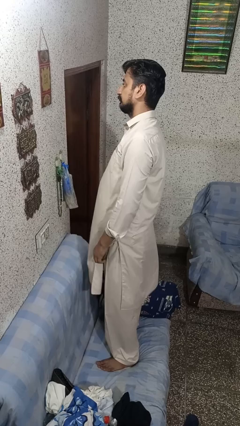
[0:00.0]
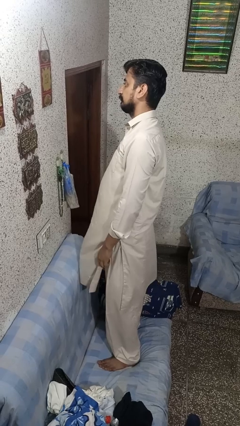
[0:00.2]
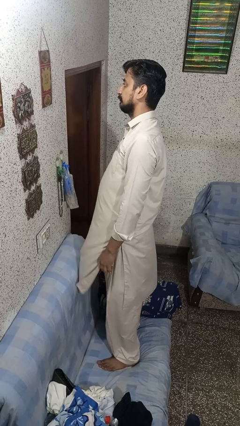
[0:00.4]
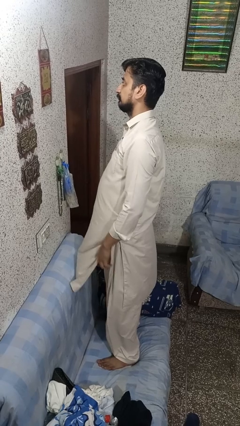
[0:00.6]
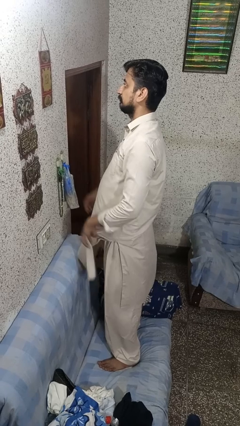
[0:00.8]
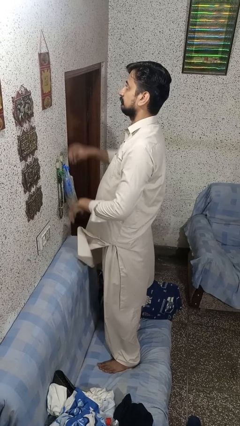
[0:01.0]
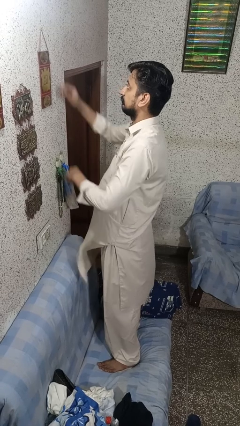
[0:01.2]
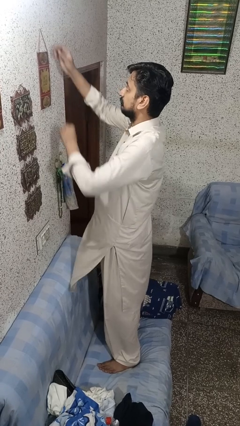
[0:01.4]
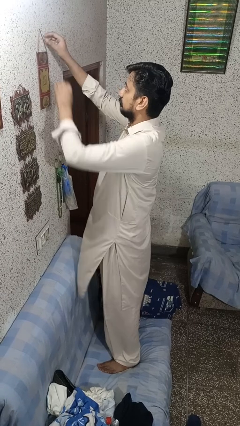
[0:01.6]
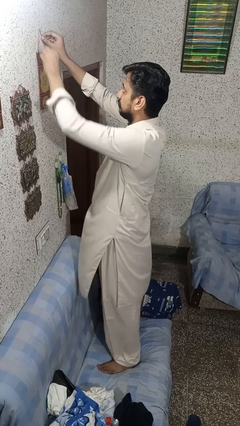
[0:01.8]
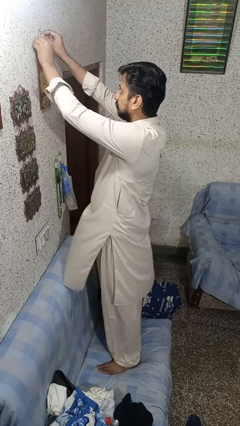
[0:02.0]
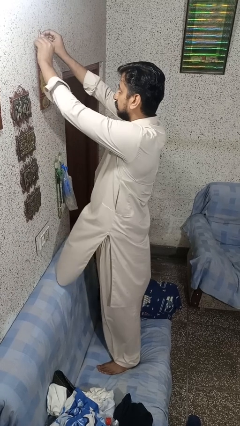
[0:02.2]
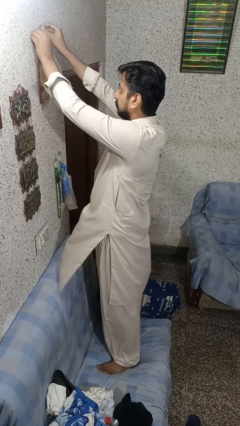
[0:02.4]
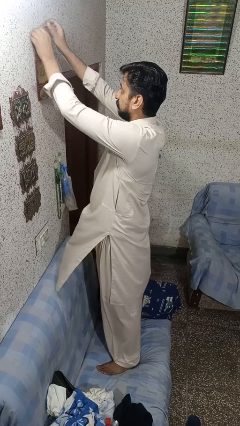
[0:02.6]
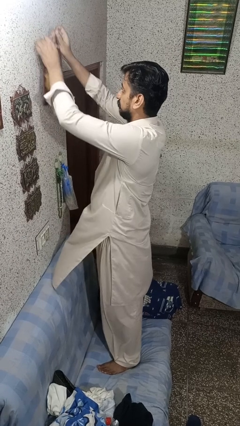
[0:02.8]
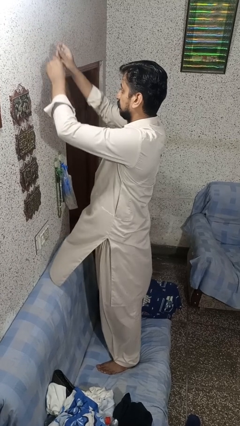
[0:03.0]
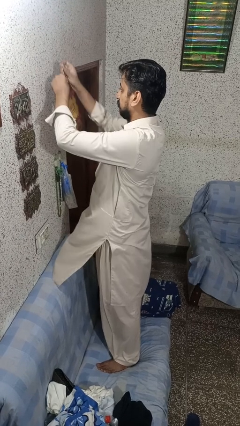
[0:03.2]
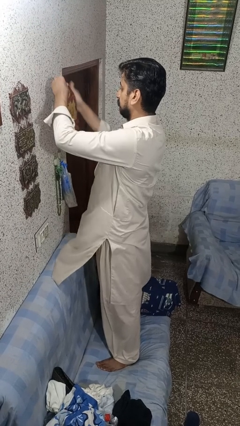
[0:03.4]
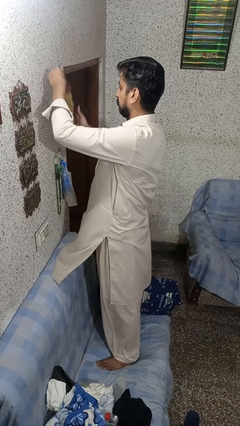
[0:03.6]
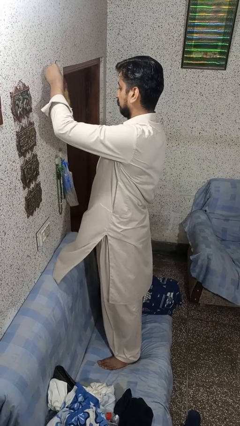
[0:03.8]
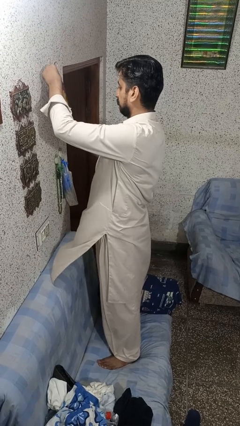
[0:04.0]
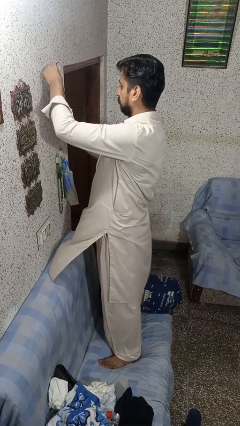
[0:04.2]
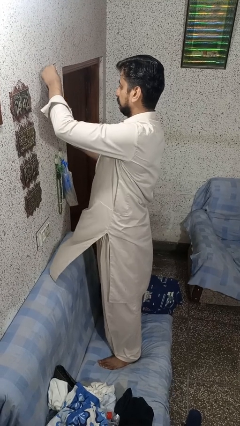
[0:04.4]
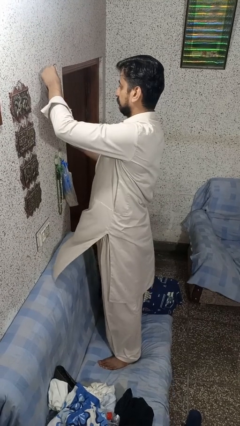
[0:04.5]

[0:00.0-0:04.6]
person takes down picture frame

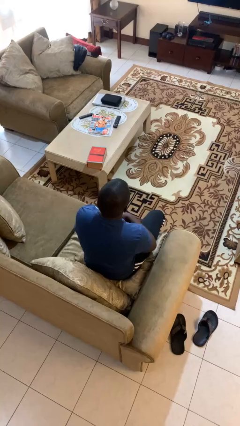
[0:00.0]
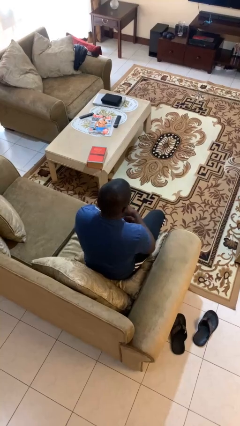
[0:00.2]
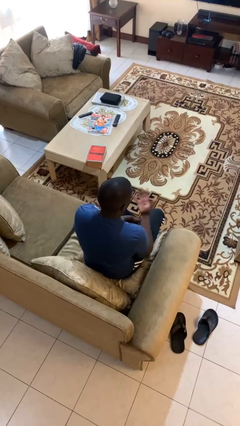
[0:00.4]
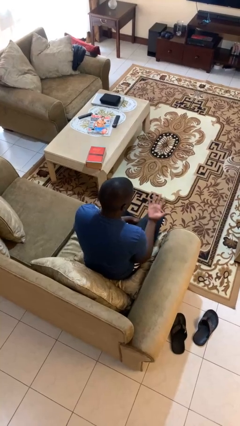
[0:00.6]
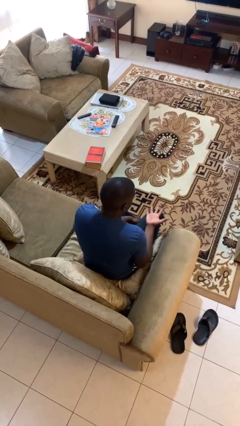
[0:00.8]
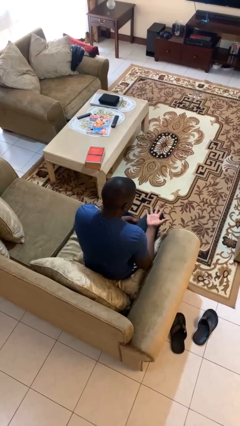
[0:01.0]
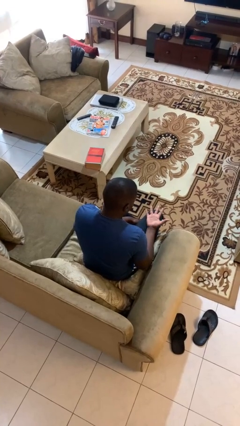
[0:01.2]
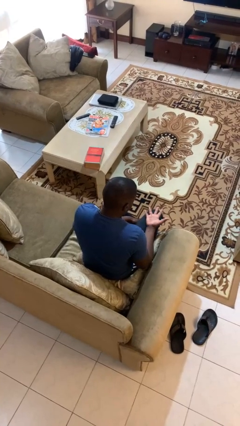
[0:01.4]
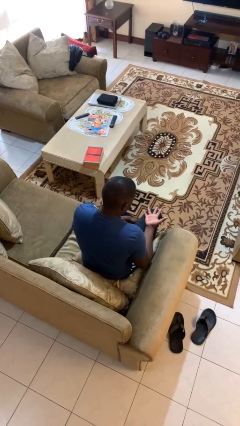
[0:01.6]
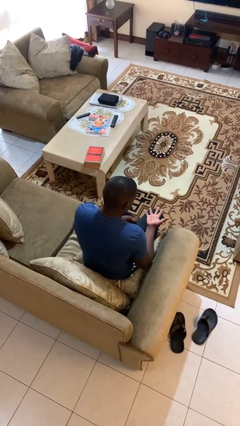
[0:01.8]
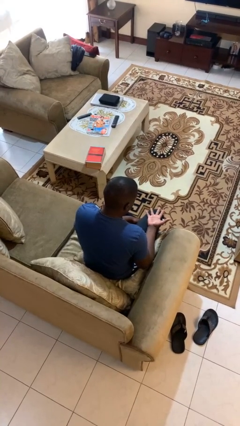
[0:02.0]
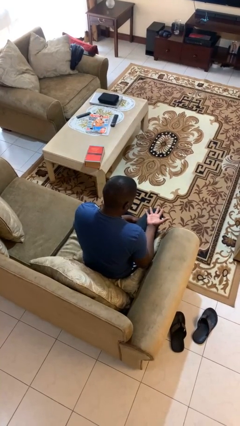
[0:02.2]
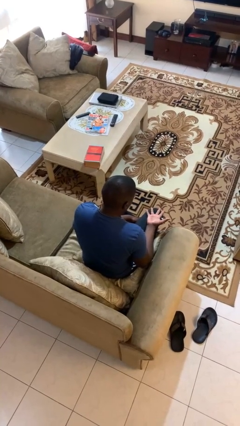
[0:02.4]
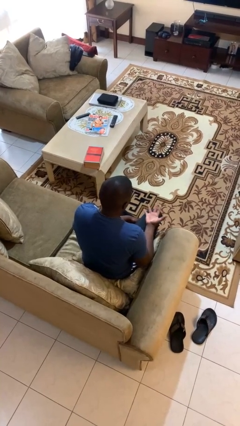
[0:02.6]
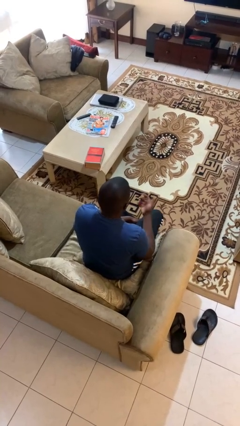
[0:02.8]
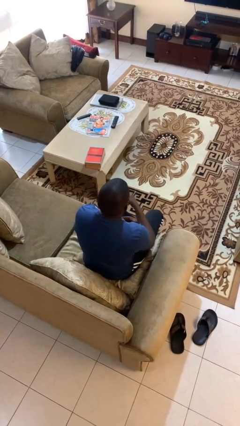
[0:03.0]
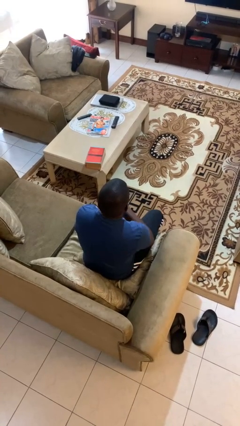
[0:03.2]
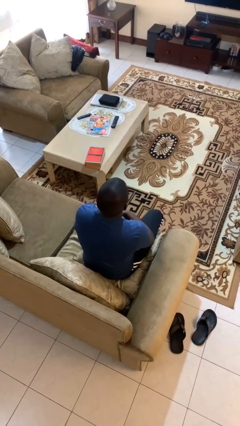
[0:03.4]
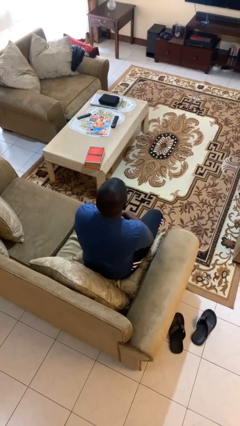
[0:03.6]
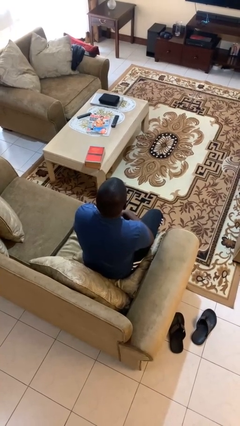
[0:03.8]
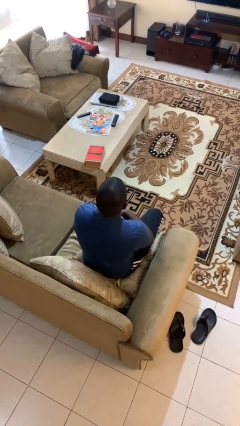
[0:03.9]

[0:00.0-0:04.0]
person looks at hands in lap

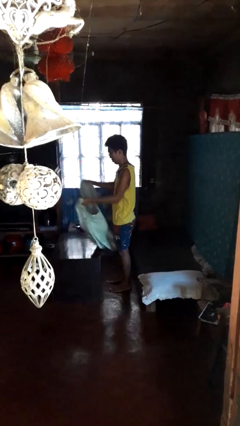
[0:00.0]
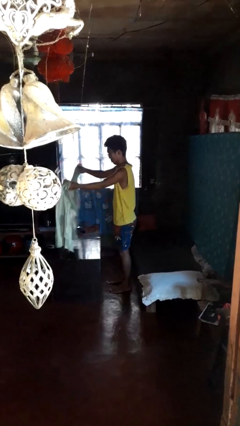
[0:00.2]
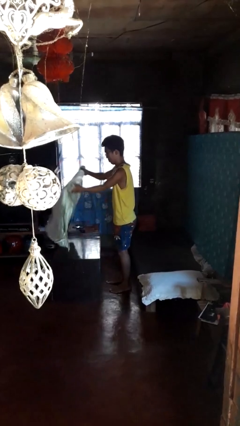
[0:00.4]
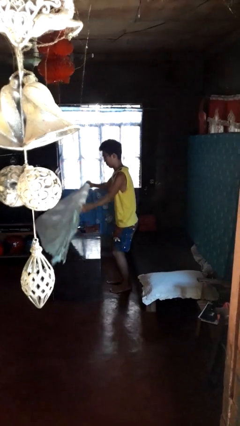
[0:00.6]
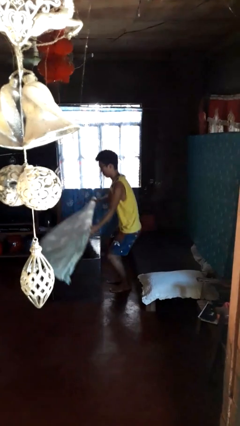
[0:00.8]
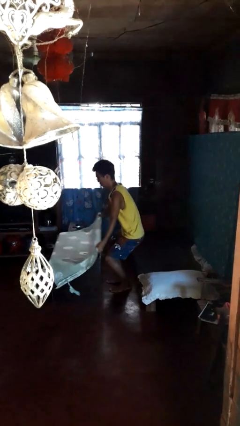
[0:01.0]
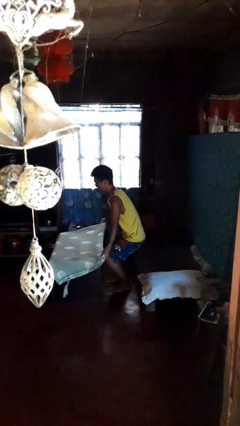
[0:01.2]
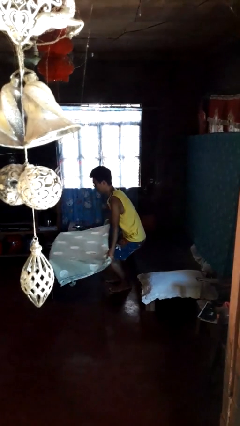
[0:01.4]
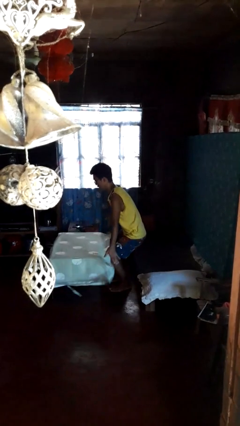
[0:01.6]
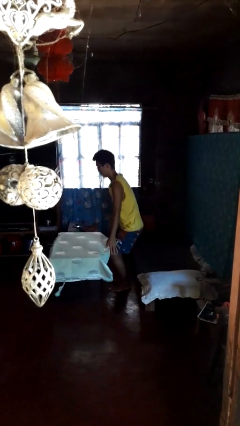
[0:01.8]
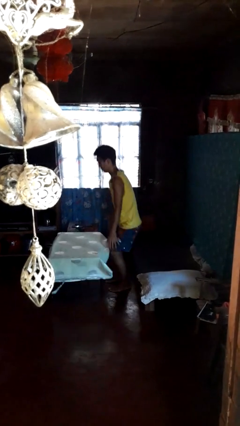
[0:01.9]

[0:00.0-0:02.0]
person spreads tablecloth

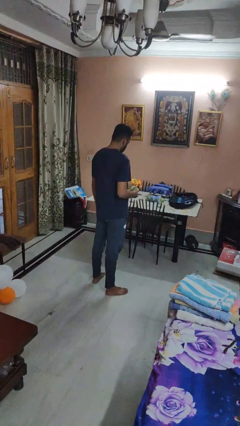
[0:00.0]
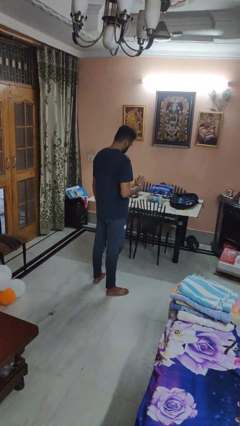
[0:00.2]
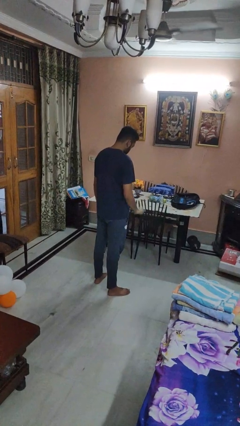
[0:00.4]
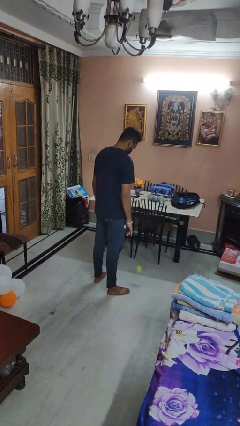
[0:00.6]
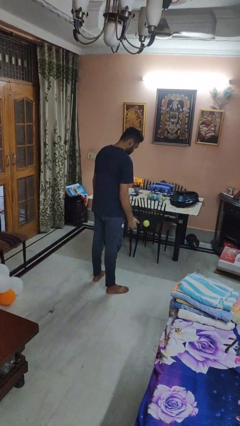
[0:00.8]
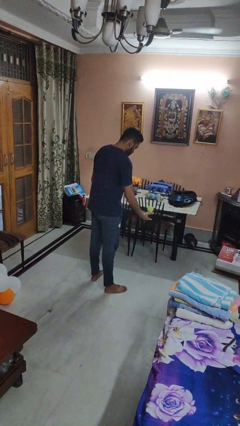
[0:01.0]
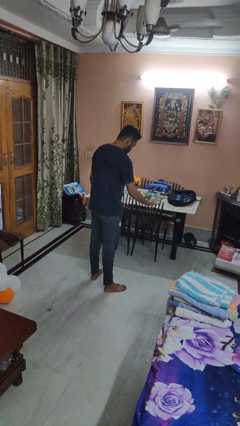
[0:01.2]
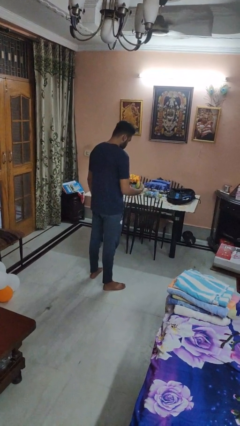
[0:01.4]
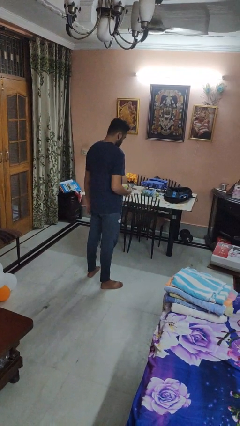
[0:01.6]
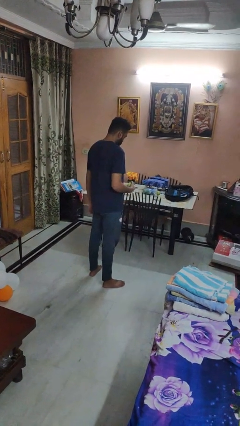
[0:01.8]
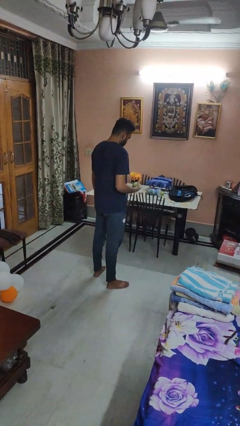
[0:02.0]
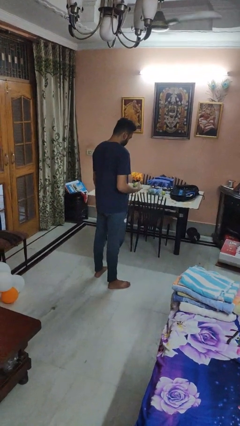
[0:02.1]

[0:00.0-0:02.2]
person bounces ball on floor

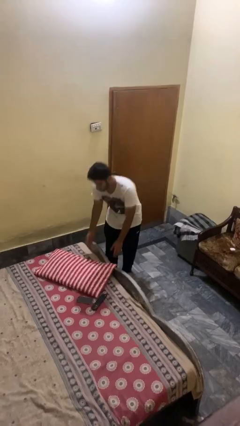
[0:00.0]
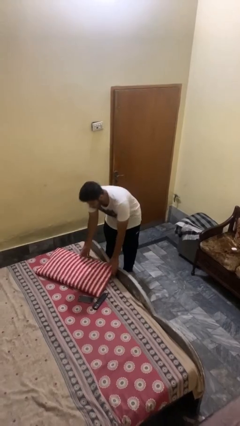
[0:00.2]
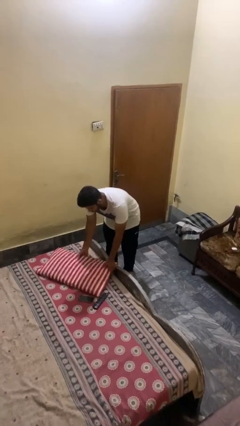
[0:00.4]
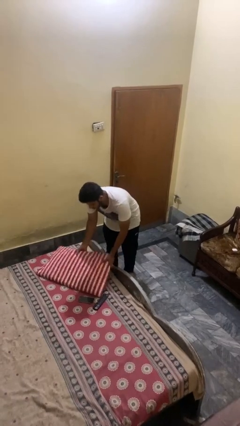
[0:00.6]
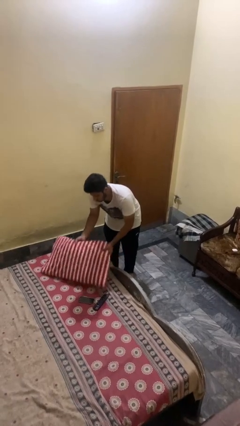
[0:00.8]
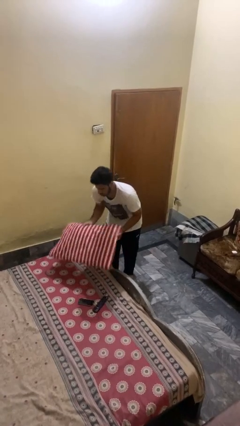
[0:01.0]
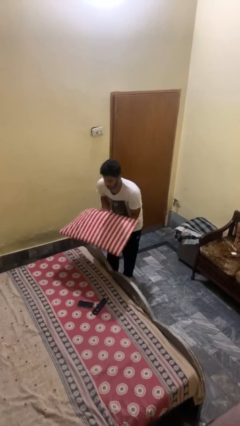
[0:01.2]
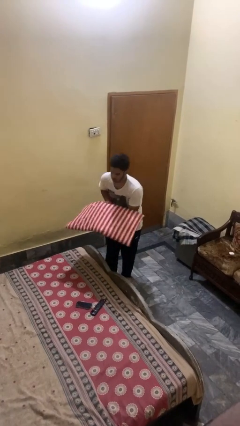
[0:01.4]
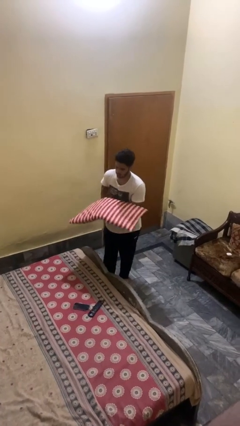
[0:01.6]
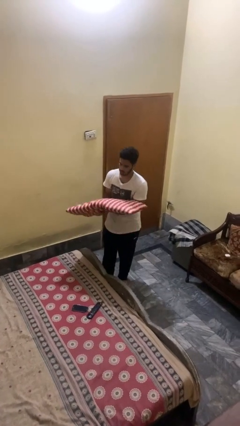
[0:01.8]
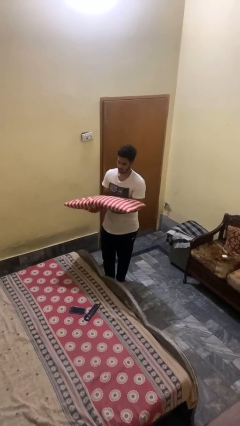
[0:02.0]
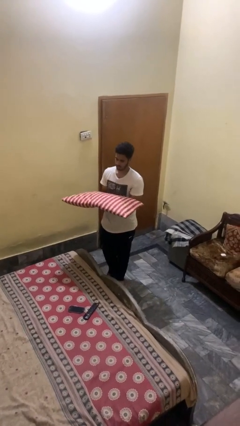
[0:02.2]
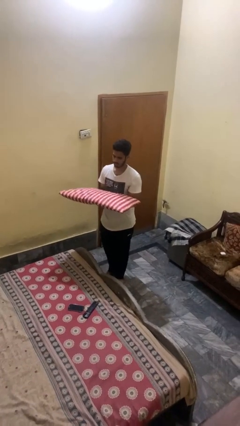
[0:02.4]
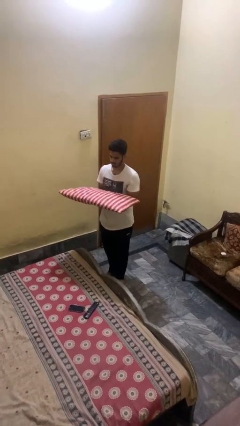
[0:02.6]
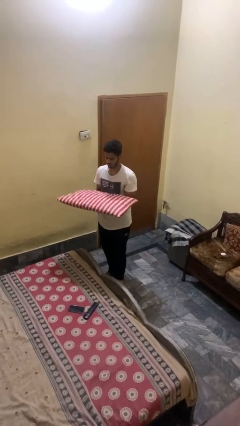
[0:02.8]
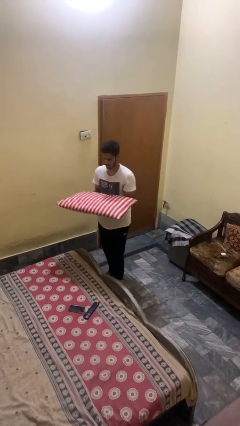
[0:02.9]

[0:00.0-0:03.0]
person picks up object from bed

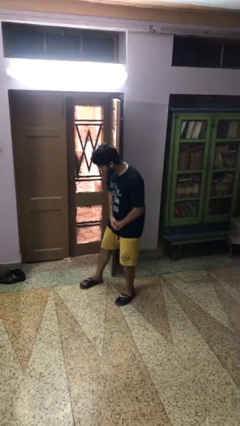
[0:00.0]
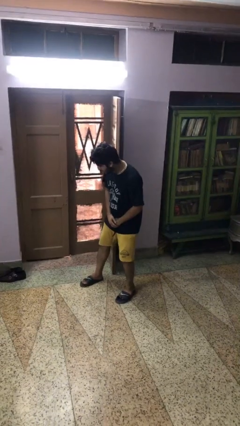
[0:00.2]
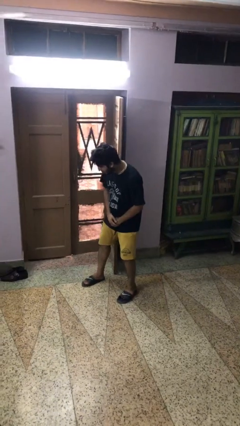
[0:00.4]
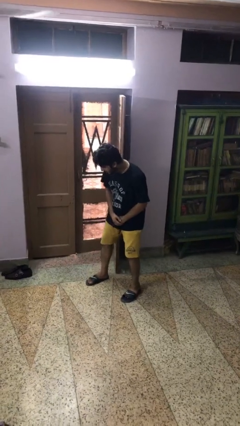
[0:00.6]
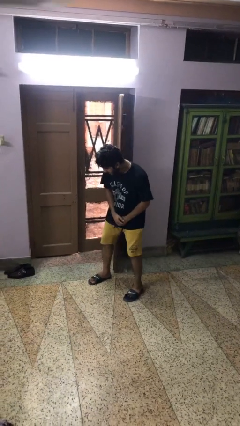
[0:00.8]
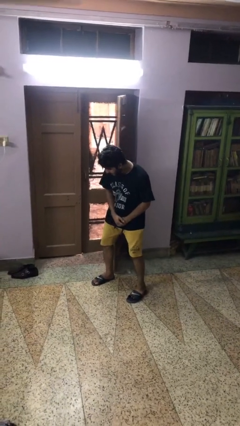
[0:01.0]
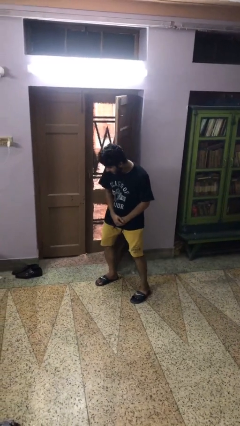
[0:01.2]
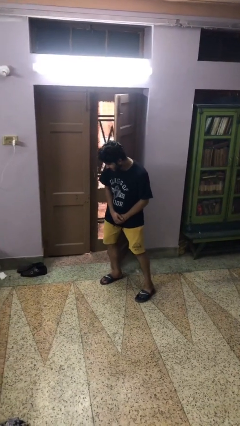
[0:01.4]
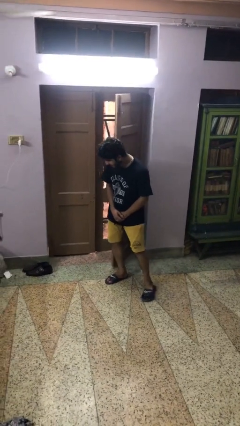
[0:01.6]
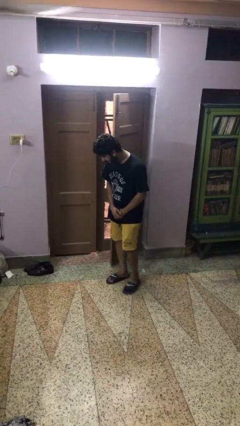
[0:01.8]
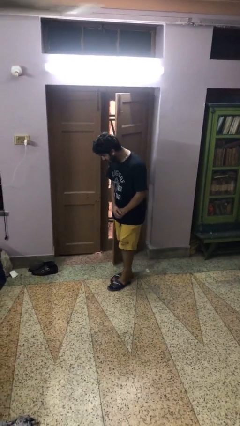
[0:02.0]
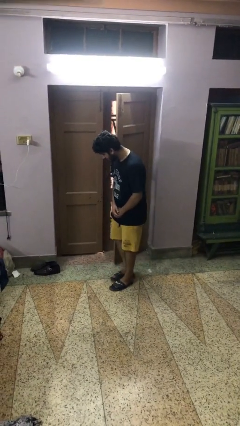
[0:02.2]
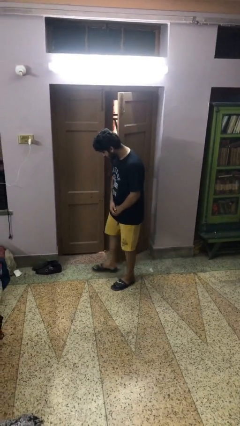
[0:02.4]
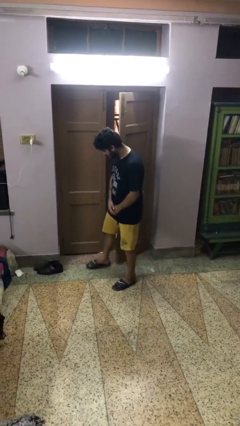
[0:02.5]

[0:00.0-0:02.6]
person closes door with hip
